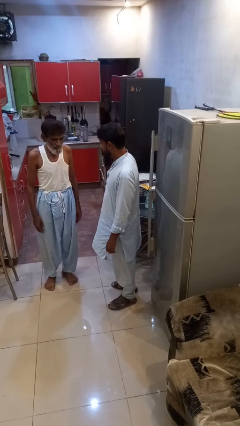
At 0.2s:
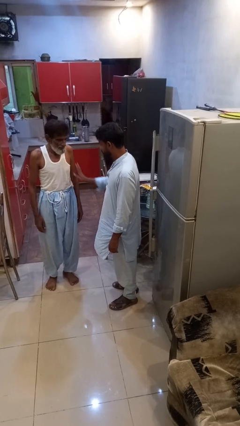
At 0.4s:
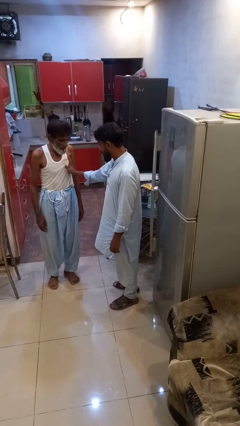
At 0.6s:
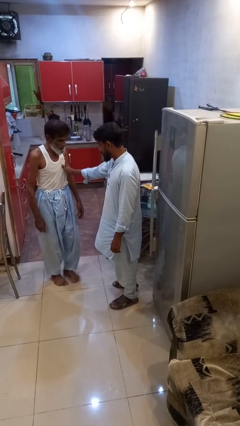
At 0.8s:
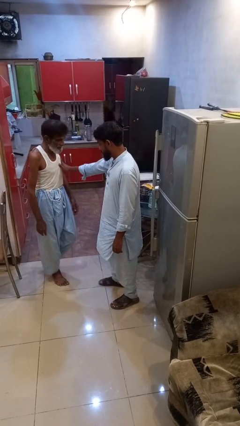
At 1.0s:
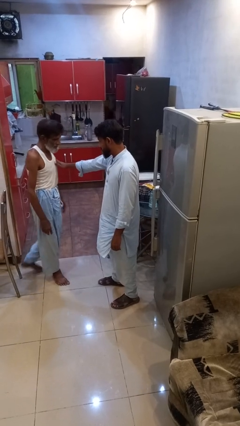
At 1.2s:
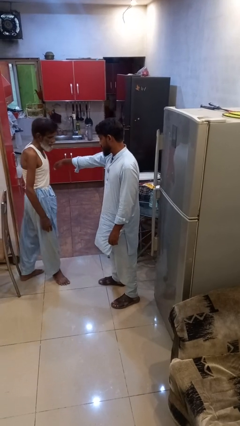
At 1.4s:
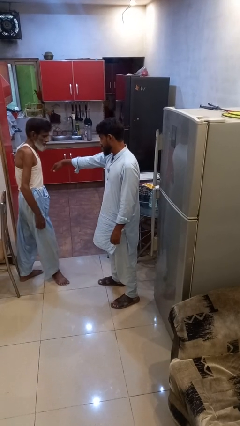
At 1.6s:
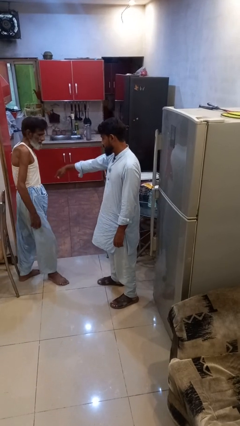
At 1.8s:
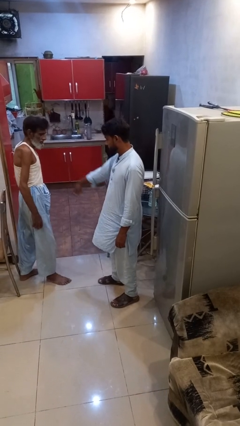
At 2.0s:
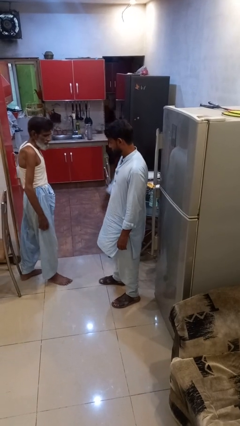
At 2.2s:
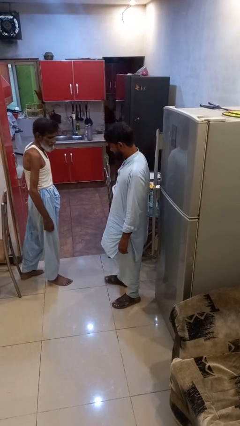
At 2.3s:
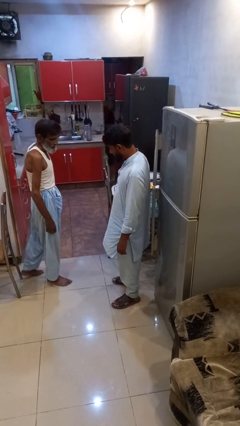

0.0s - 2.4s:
person shoves person

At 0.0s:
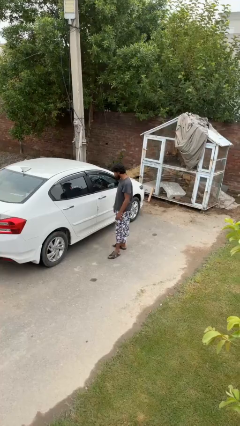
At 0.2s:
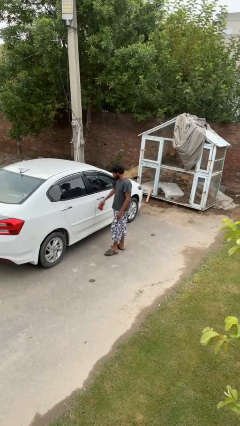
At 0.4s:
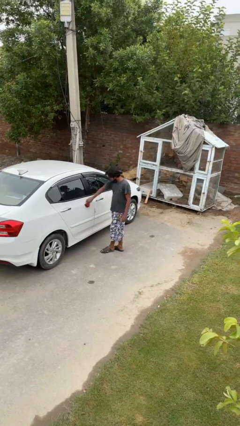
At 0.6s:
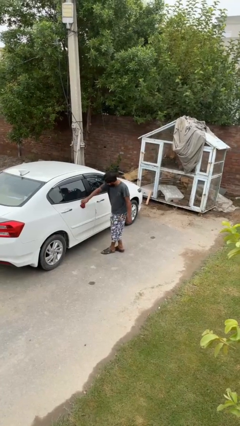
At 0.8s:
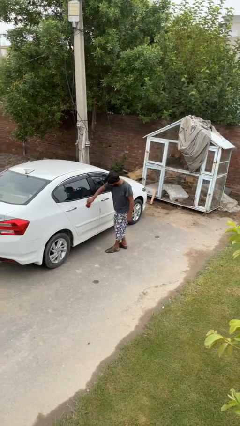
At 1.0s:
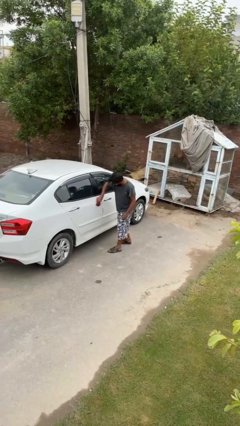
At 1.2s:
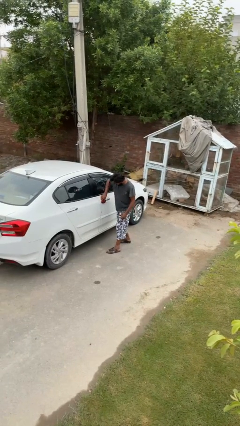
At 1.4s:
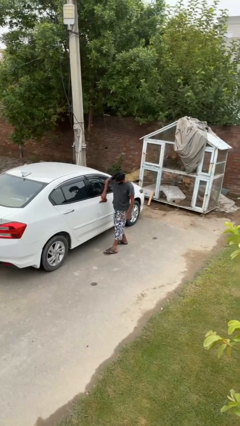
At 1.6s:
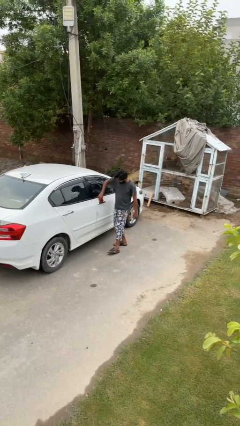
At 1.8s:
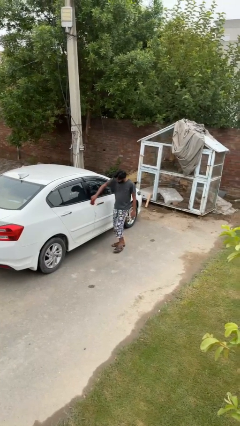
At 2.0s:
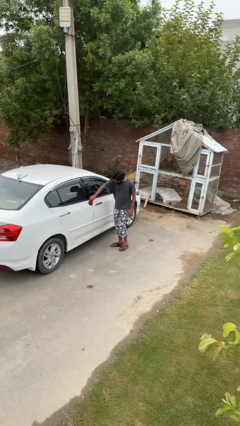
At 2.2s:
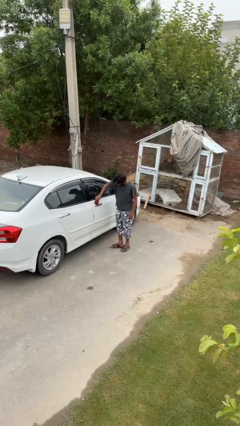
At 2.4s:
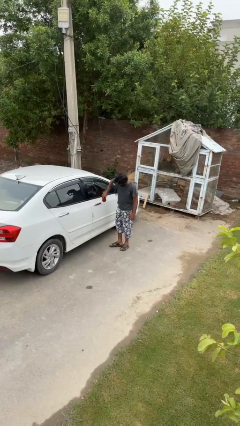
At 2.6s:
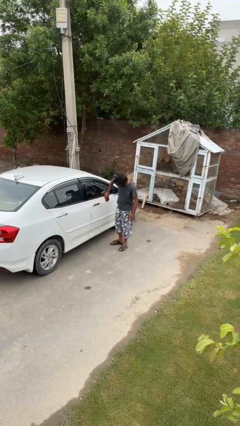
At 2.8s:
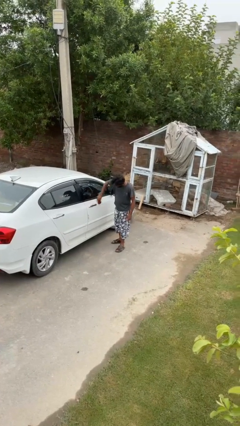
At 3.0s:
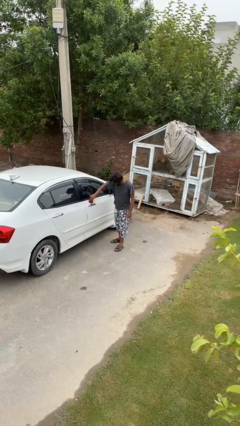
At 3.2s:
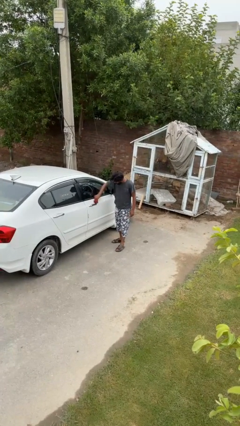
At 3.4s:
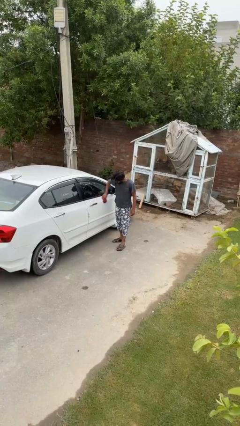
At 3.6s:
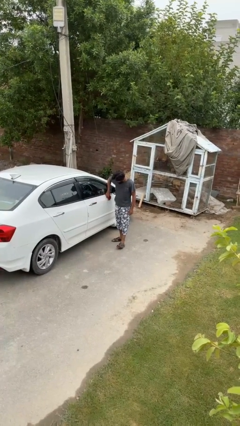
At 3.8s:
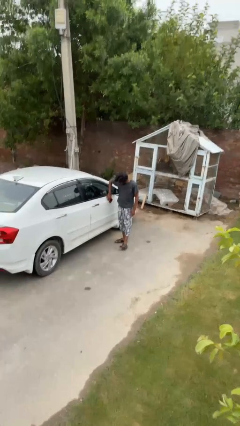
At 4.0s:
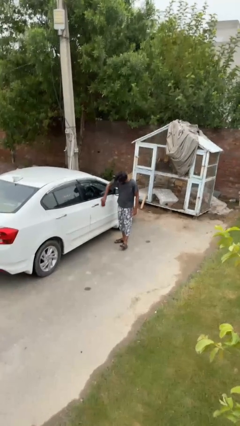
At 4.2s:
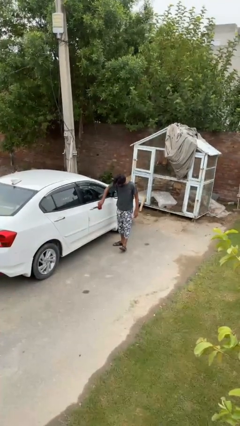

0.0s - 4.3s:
person polishes car with rag

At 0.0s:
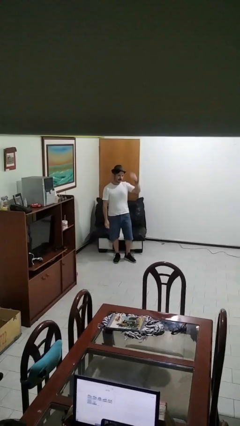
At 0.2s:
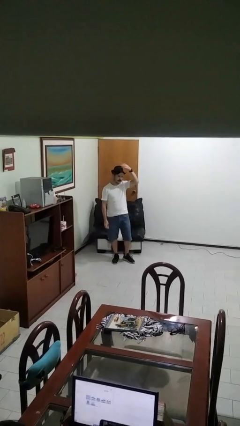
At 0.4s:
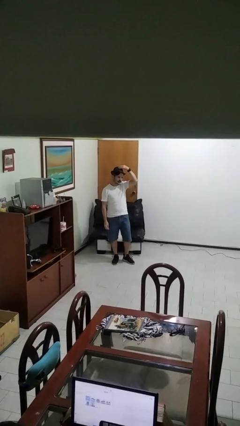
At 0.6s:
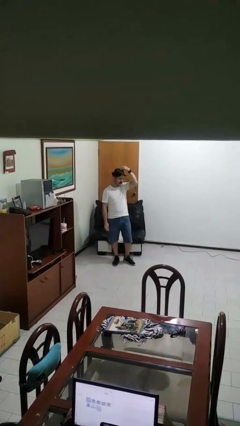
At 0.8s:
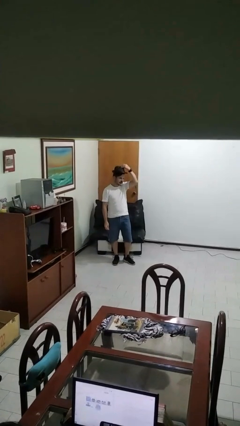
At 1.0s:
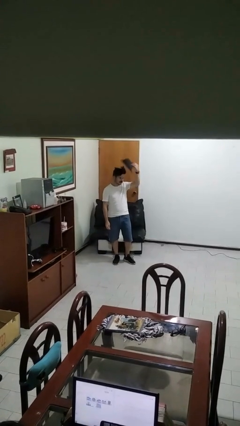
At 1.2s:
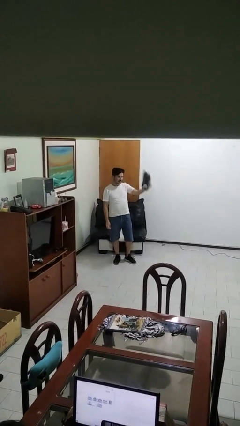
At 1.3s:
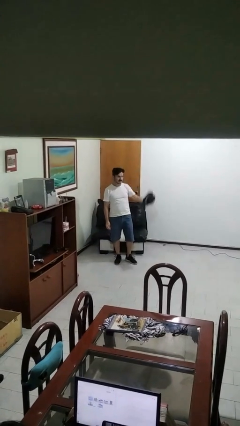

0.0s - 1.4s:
person takes off hat

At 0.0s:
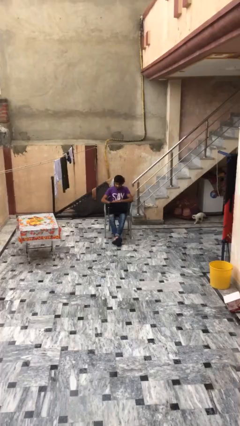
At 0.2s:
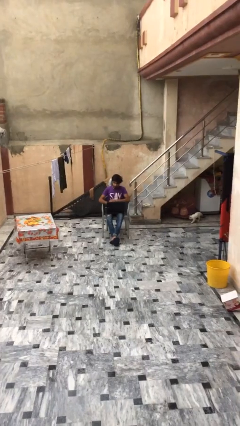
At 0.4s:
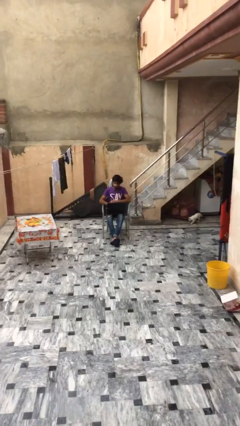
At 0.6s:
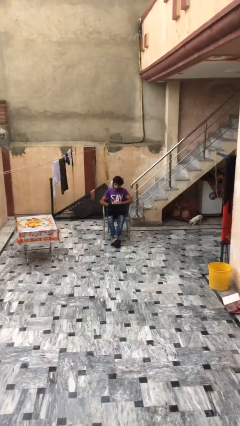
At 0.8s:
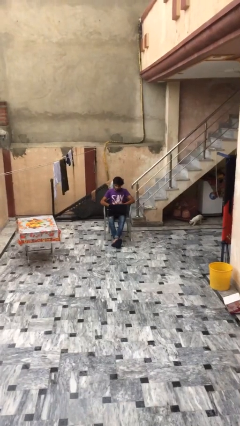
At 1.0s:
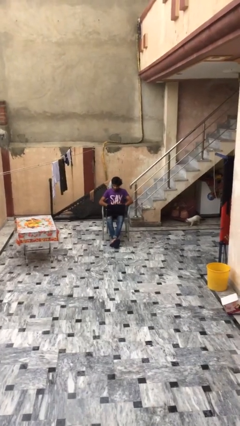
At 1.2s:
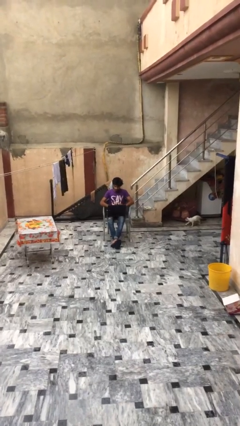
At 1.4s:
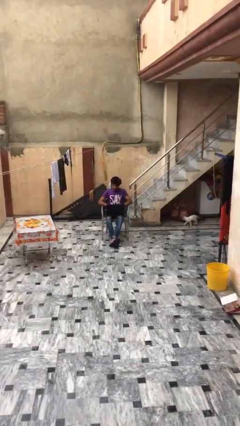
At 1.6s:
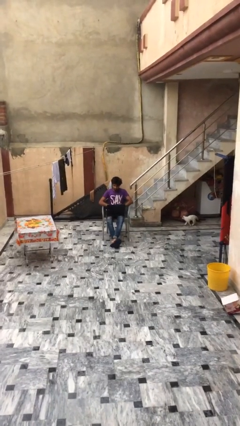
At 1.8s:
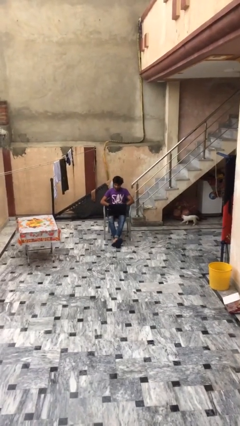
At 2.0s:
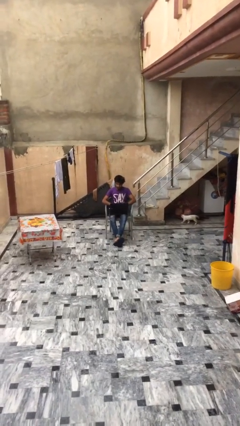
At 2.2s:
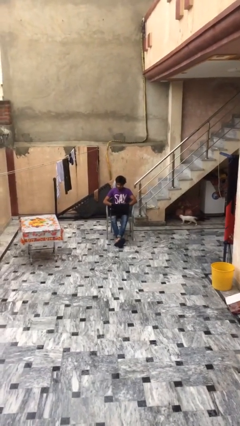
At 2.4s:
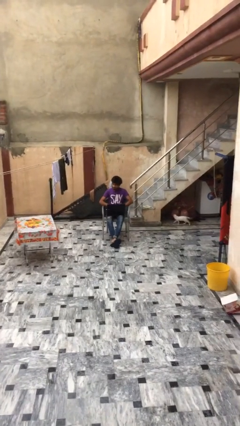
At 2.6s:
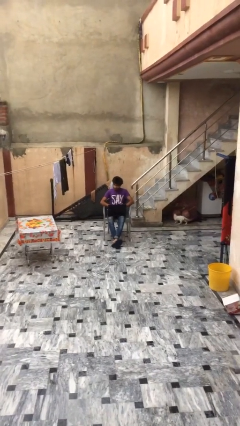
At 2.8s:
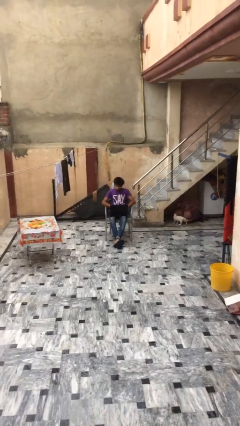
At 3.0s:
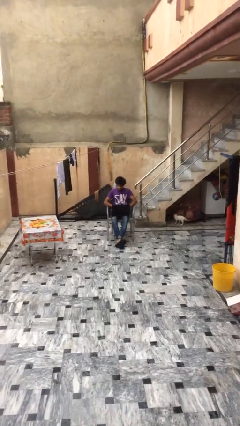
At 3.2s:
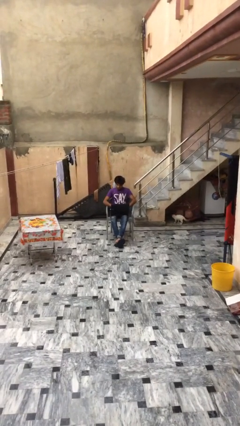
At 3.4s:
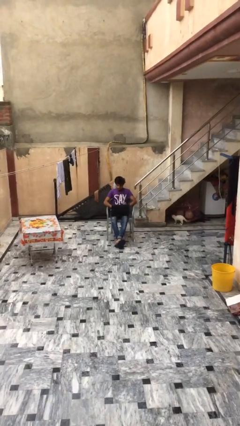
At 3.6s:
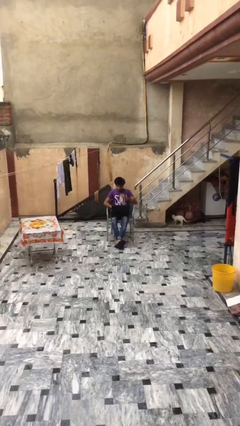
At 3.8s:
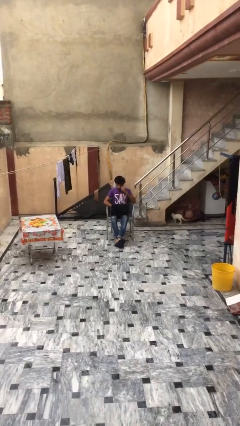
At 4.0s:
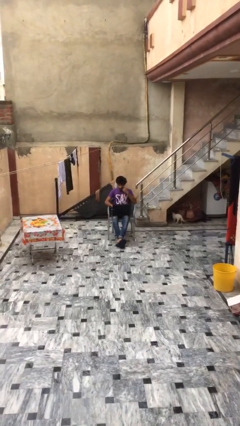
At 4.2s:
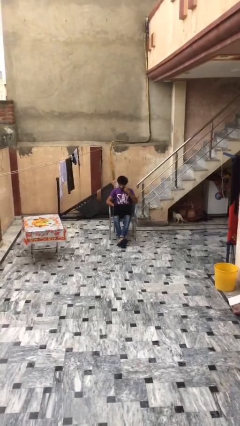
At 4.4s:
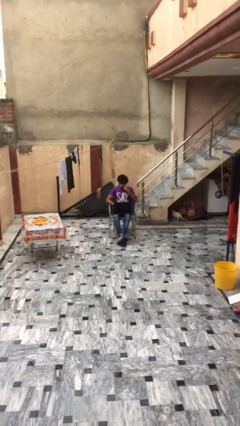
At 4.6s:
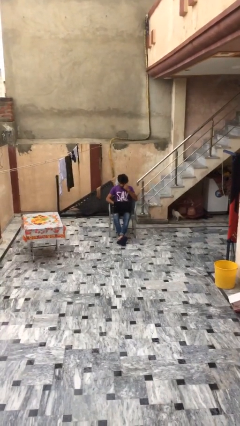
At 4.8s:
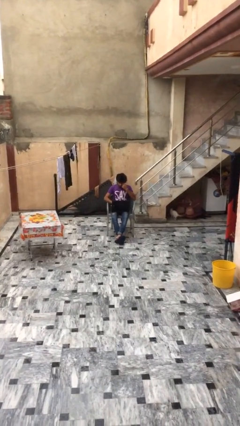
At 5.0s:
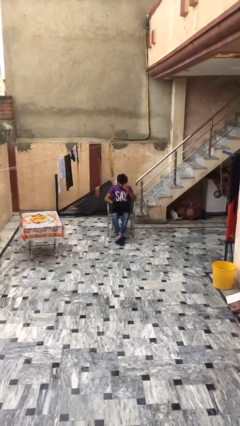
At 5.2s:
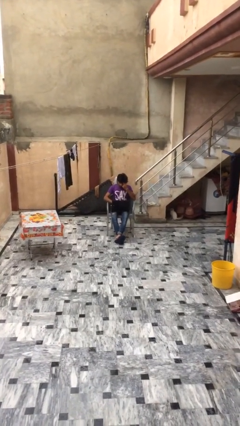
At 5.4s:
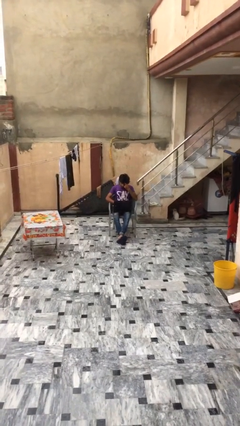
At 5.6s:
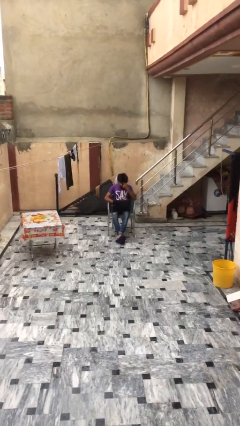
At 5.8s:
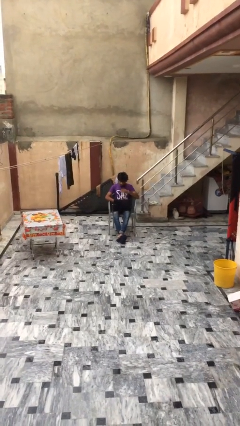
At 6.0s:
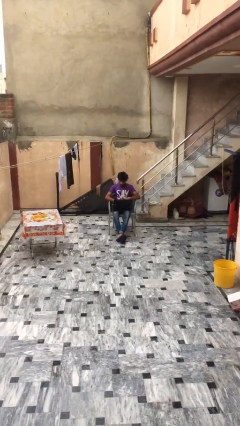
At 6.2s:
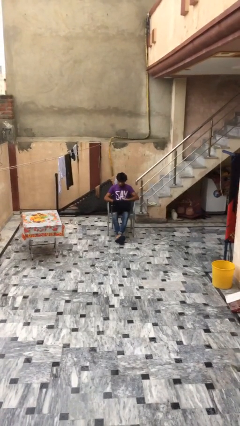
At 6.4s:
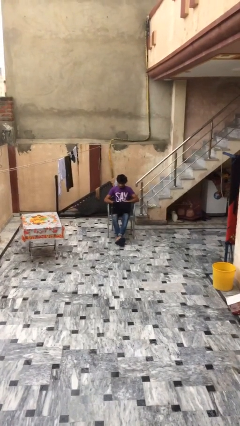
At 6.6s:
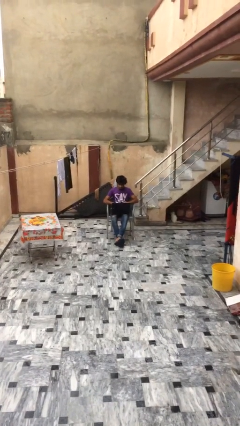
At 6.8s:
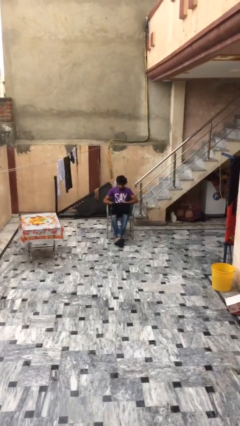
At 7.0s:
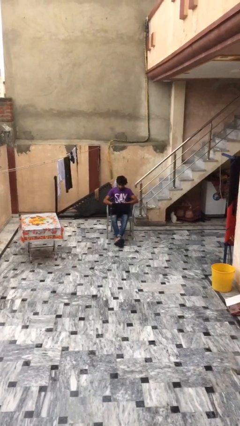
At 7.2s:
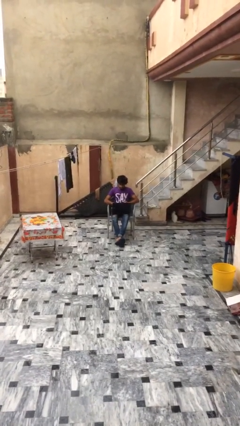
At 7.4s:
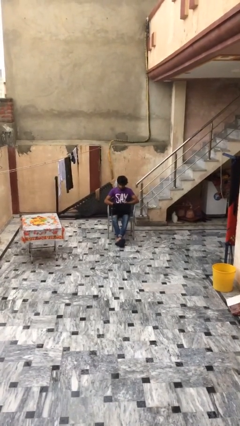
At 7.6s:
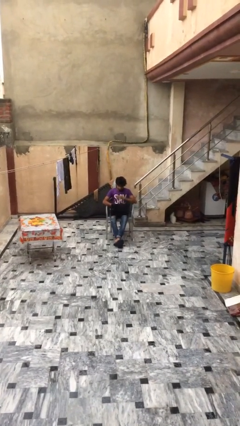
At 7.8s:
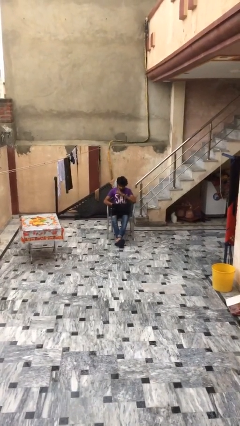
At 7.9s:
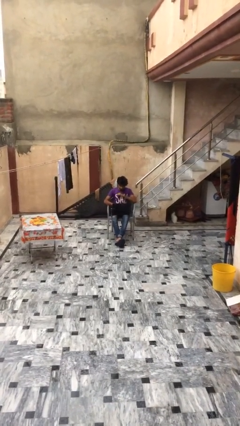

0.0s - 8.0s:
person interacts with laptop

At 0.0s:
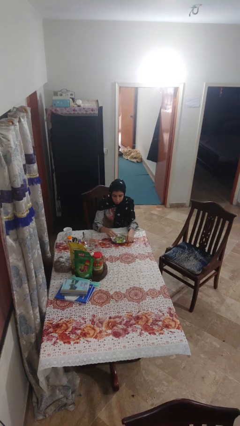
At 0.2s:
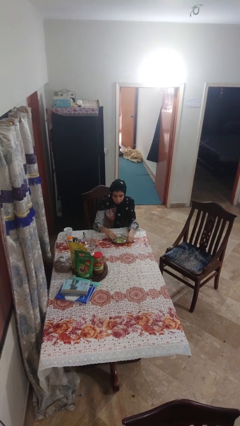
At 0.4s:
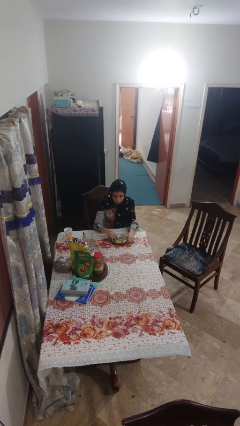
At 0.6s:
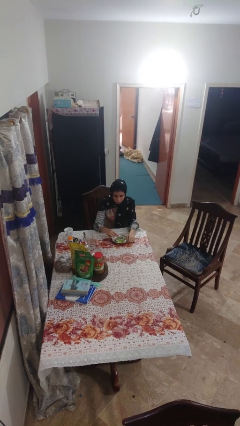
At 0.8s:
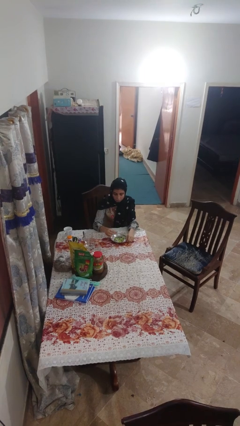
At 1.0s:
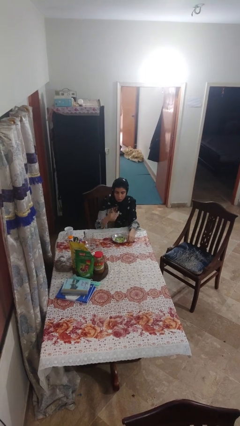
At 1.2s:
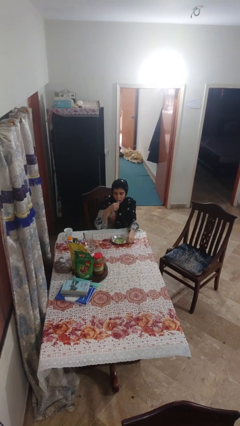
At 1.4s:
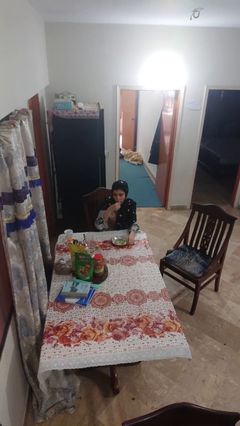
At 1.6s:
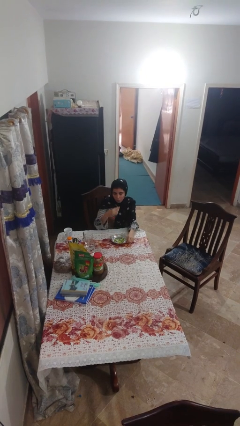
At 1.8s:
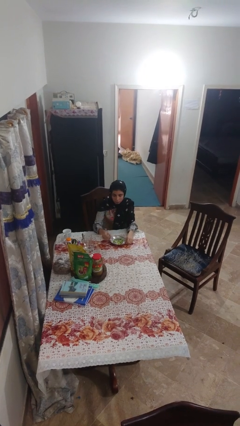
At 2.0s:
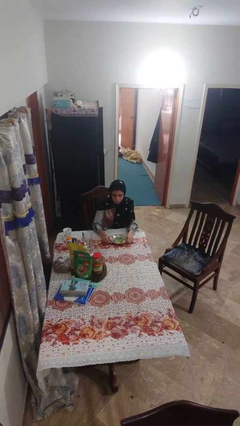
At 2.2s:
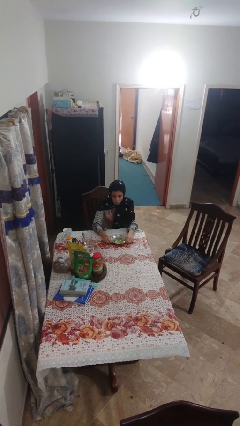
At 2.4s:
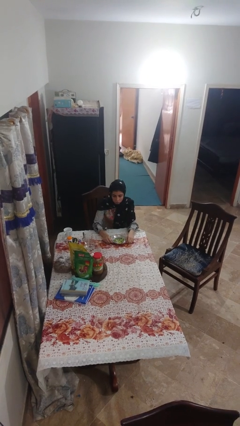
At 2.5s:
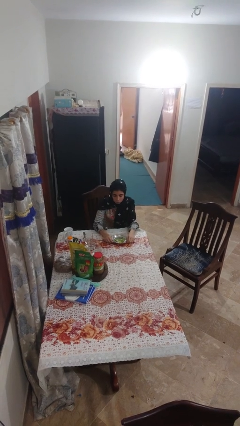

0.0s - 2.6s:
person eats with hands
